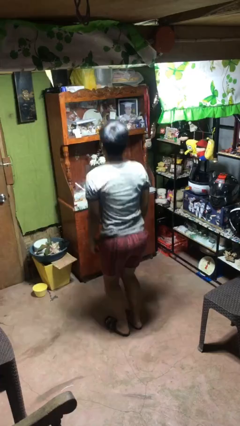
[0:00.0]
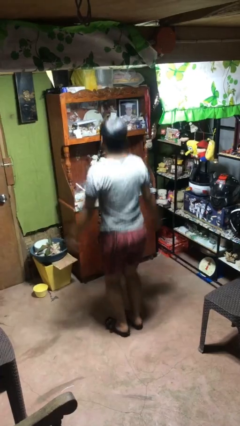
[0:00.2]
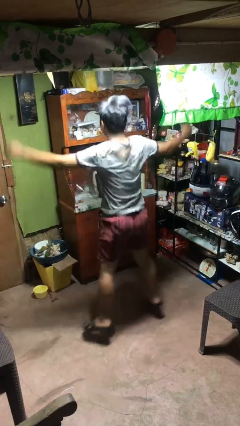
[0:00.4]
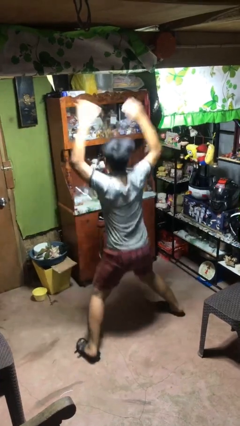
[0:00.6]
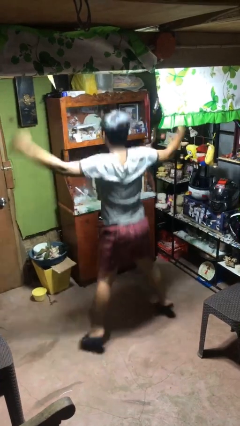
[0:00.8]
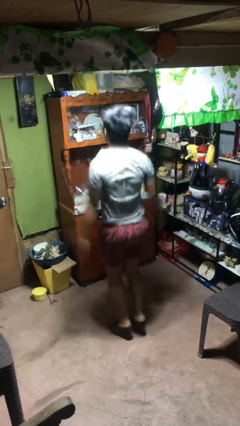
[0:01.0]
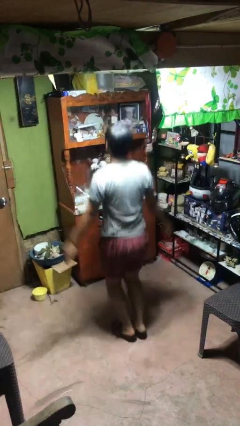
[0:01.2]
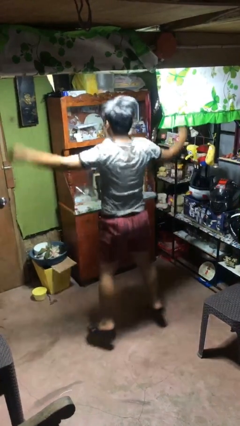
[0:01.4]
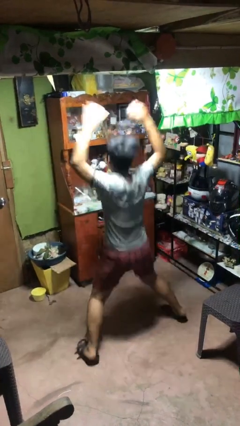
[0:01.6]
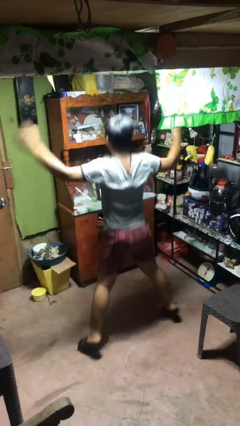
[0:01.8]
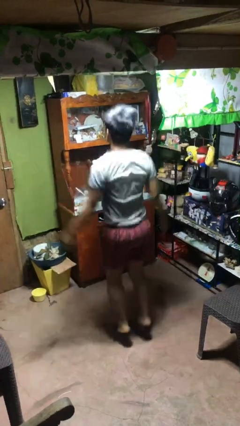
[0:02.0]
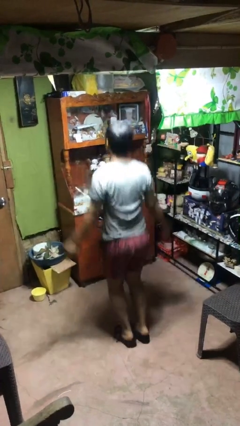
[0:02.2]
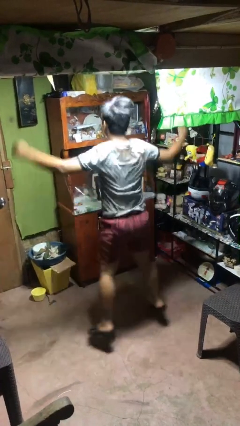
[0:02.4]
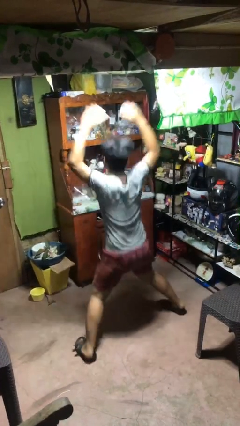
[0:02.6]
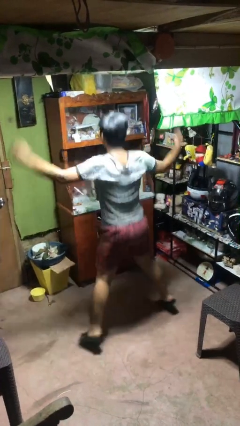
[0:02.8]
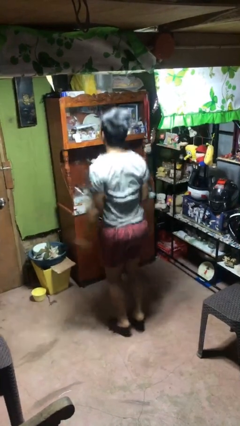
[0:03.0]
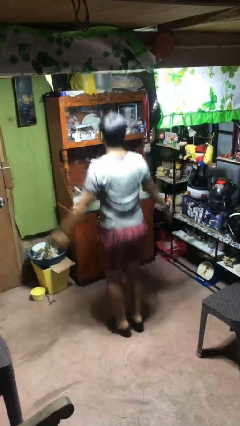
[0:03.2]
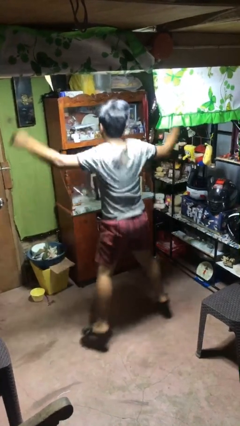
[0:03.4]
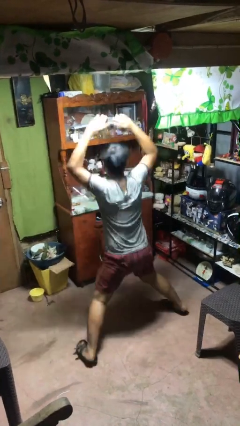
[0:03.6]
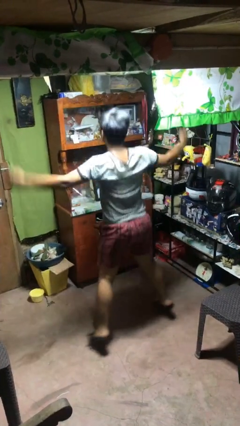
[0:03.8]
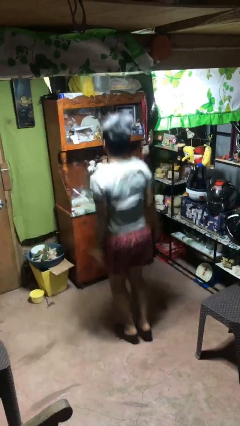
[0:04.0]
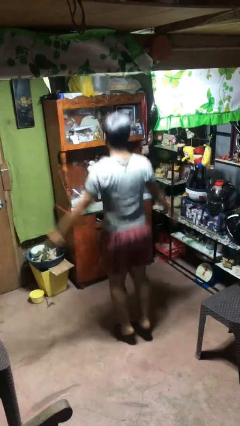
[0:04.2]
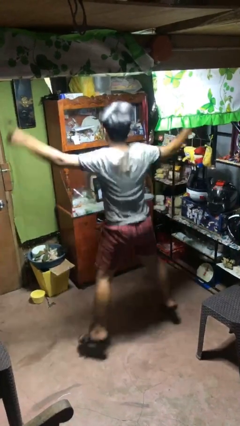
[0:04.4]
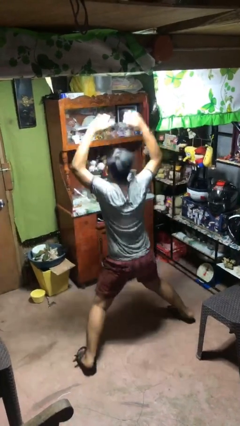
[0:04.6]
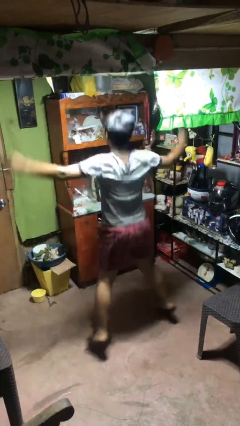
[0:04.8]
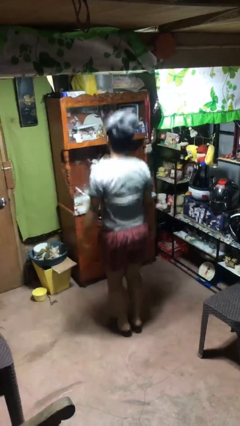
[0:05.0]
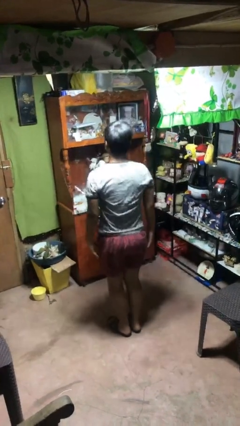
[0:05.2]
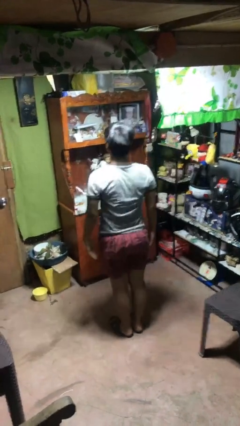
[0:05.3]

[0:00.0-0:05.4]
person exercises with jumping jacks

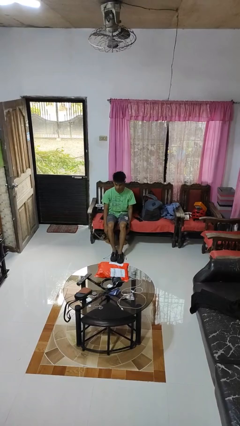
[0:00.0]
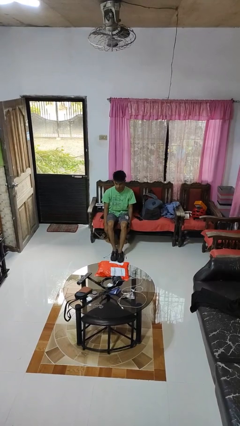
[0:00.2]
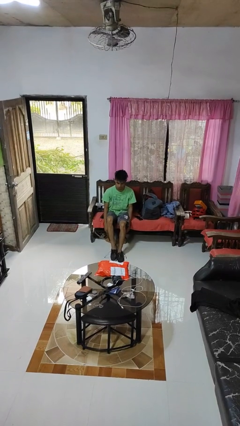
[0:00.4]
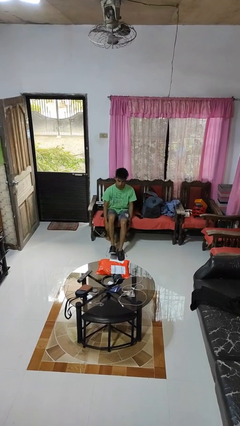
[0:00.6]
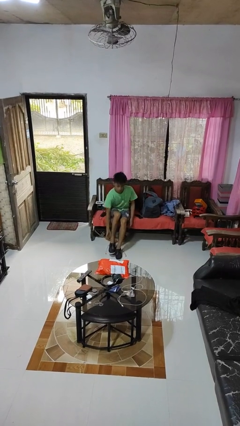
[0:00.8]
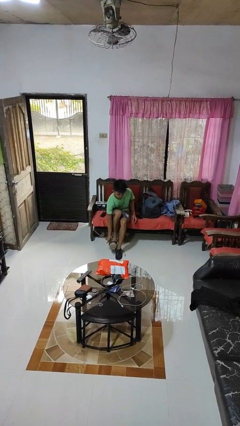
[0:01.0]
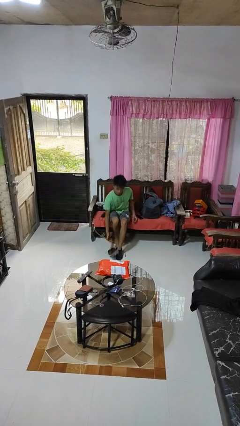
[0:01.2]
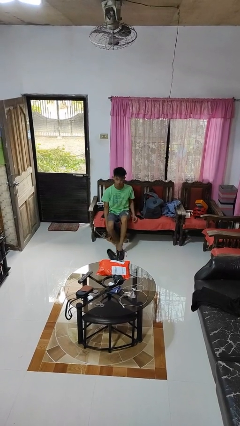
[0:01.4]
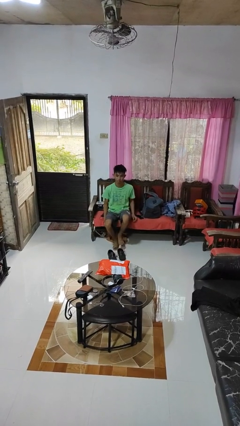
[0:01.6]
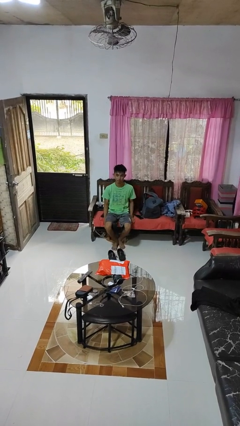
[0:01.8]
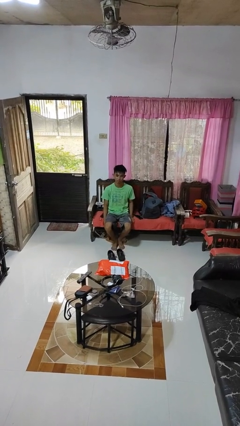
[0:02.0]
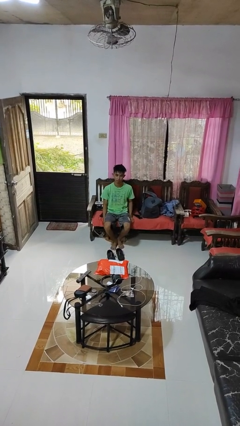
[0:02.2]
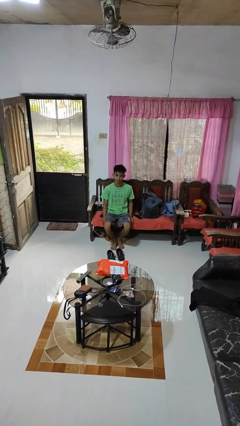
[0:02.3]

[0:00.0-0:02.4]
person takes off shoes

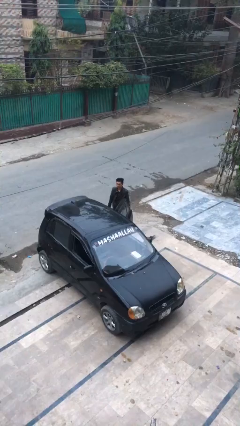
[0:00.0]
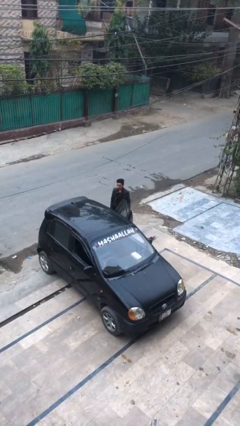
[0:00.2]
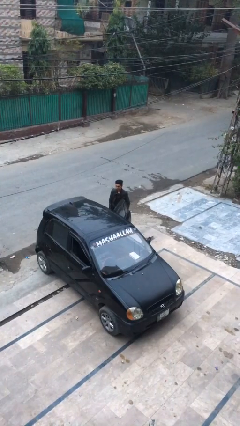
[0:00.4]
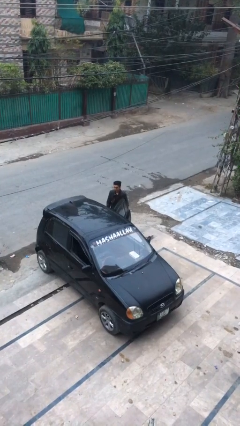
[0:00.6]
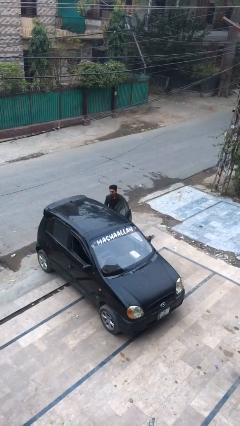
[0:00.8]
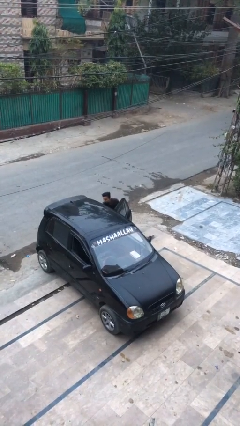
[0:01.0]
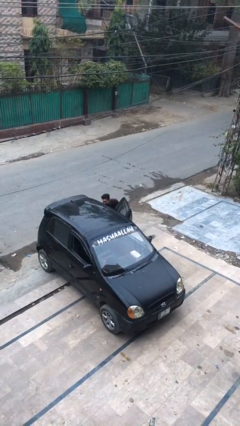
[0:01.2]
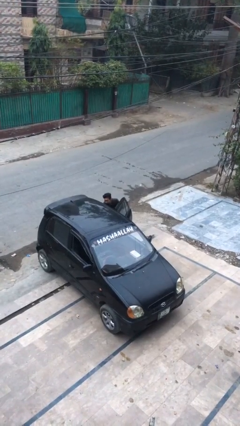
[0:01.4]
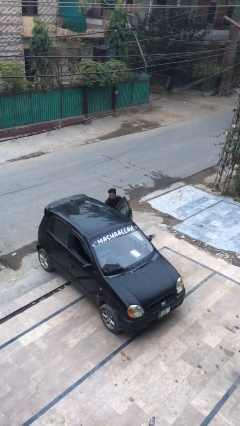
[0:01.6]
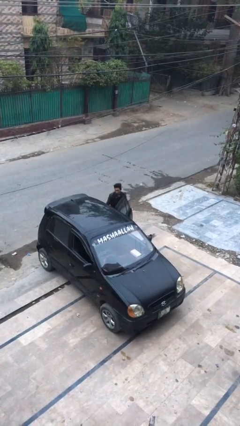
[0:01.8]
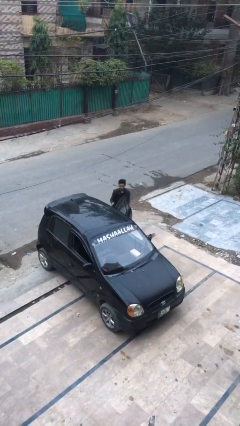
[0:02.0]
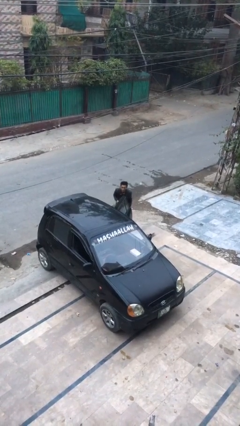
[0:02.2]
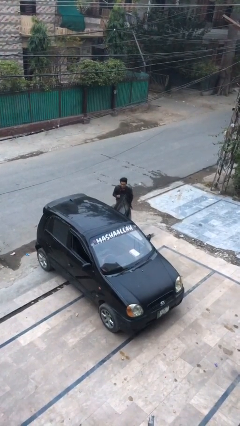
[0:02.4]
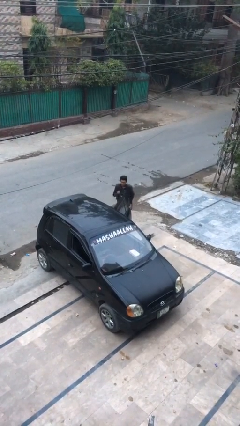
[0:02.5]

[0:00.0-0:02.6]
person unloads car

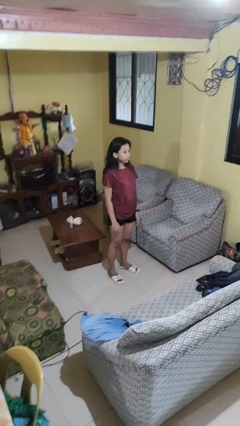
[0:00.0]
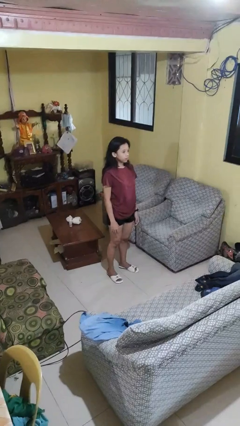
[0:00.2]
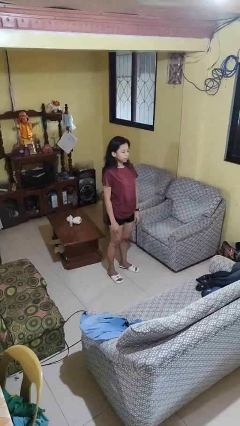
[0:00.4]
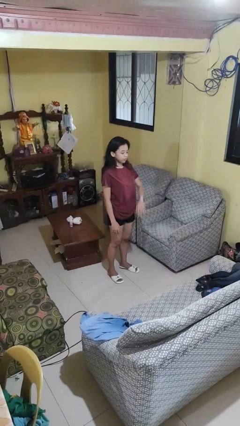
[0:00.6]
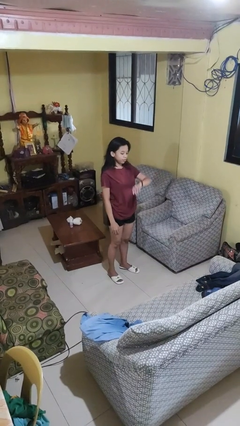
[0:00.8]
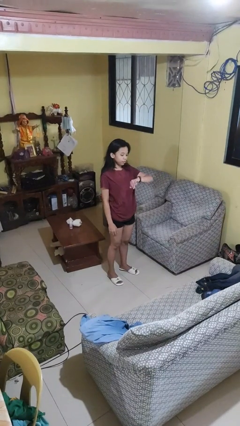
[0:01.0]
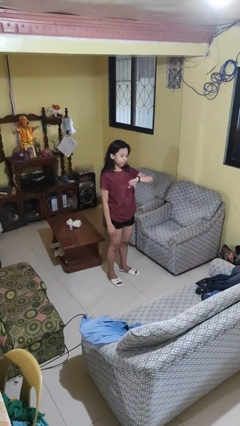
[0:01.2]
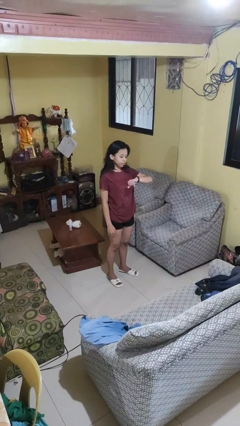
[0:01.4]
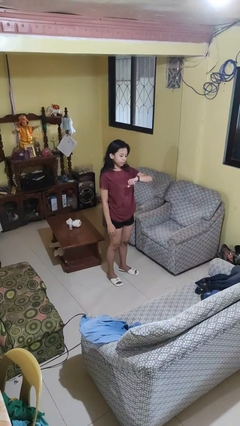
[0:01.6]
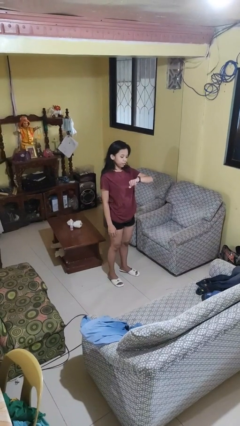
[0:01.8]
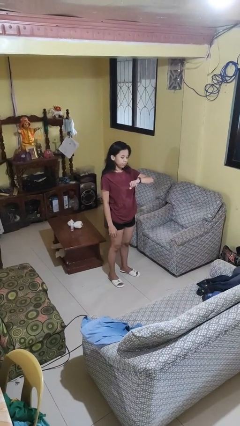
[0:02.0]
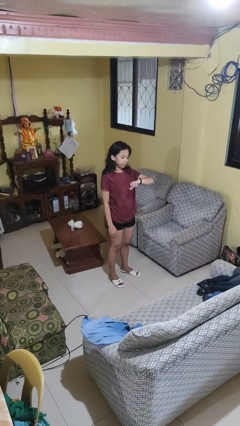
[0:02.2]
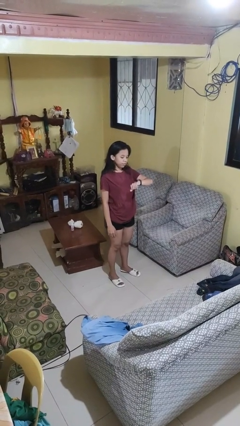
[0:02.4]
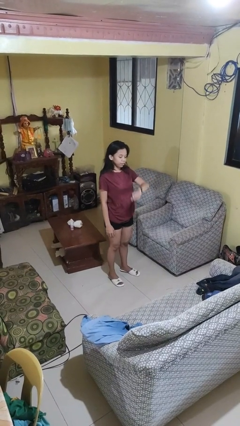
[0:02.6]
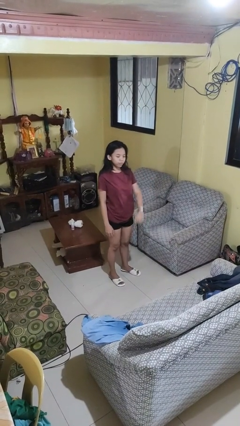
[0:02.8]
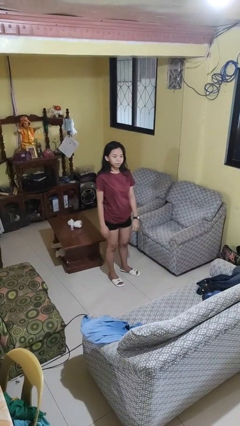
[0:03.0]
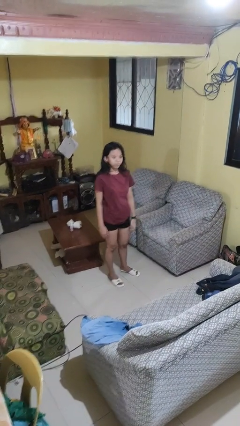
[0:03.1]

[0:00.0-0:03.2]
person looks at wristwatch

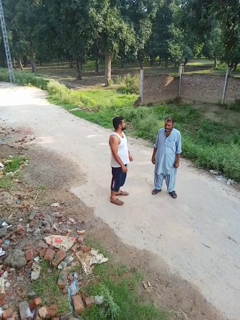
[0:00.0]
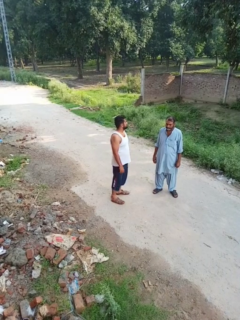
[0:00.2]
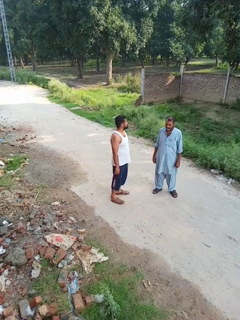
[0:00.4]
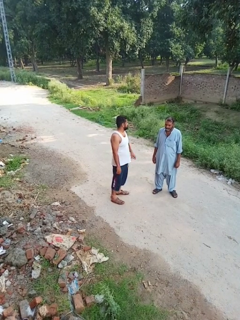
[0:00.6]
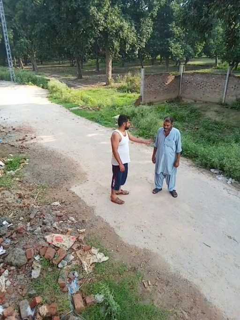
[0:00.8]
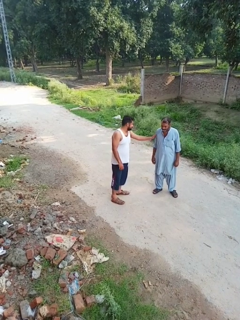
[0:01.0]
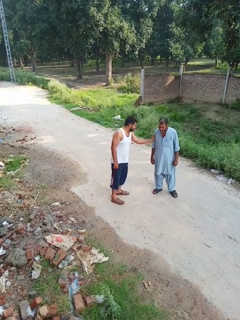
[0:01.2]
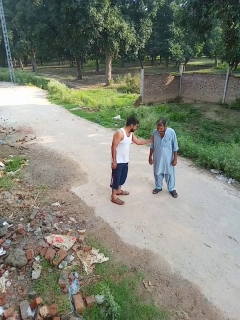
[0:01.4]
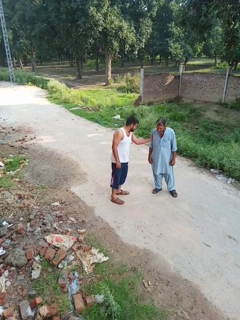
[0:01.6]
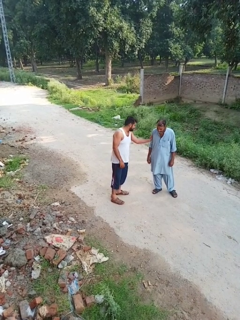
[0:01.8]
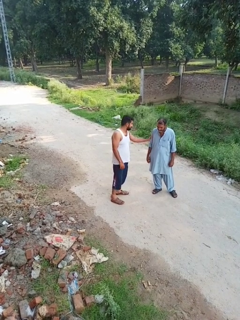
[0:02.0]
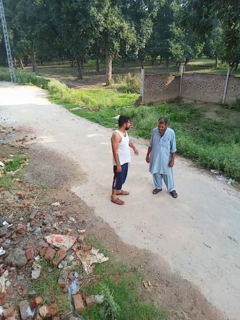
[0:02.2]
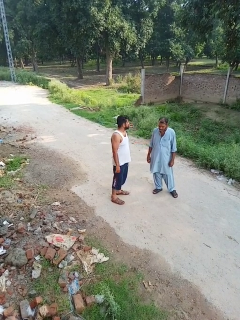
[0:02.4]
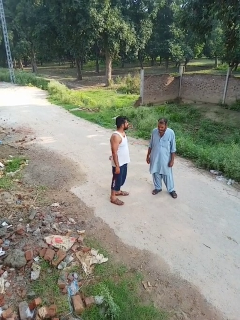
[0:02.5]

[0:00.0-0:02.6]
person grabs person by forearm

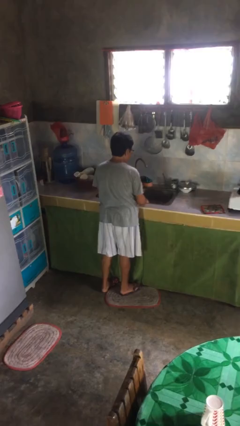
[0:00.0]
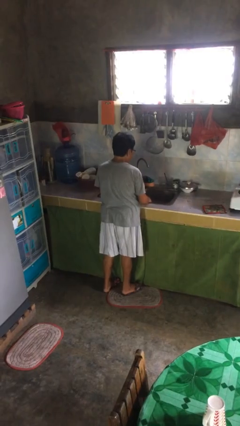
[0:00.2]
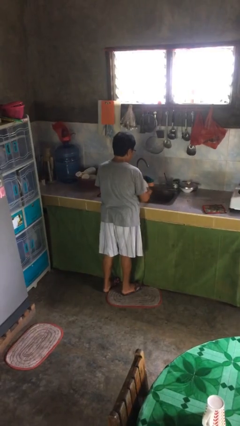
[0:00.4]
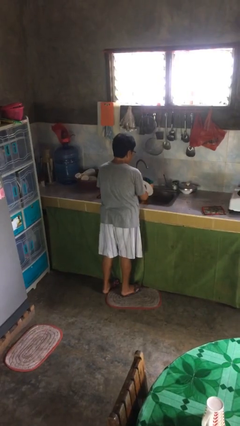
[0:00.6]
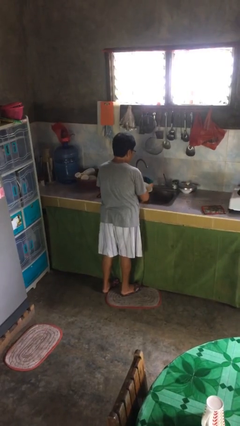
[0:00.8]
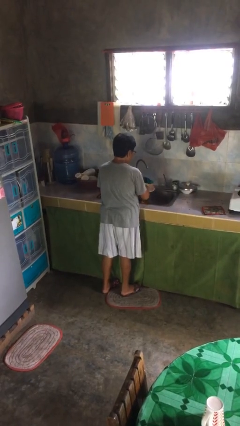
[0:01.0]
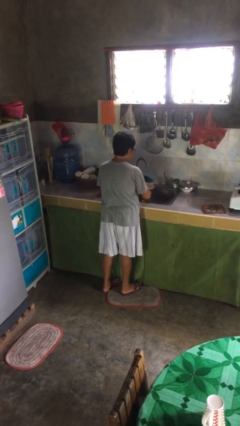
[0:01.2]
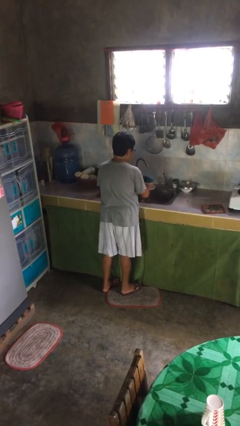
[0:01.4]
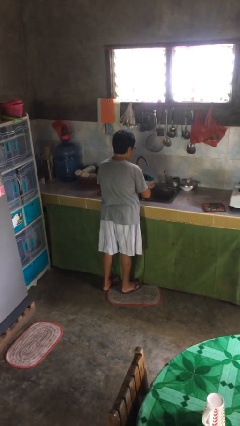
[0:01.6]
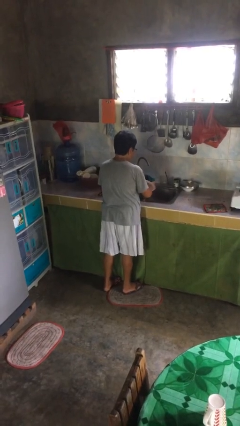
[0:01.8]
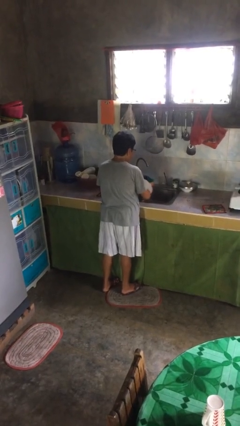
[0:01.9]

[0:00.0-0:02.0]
person washes dish
